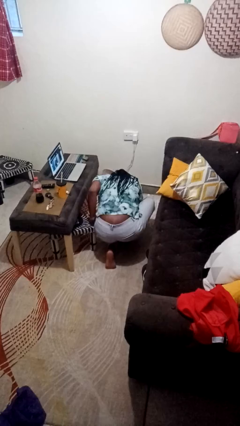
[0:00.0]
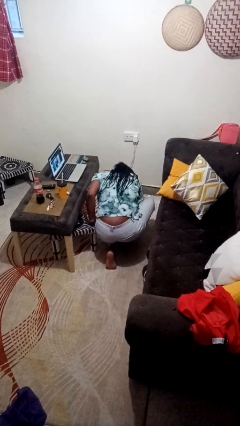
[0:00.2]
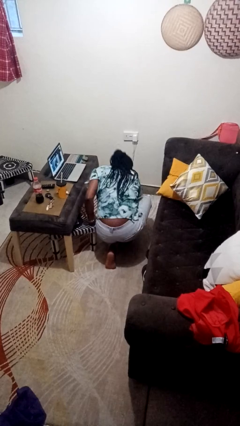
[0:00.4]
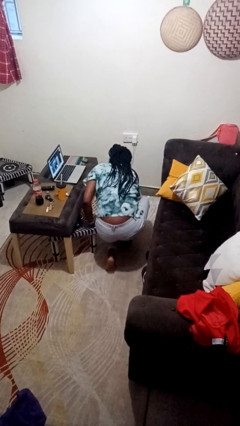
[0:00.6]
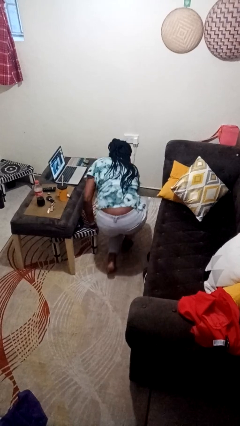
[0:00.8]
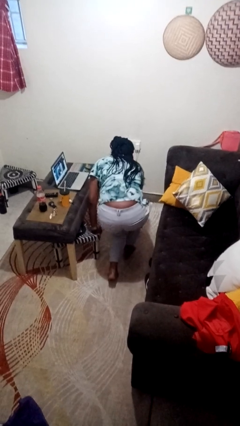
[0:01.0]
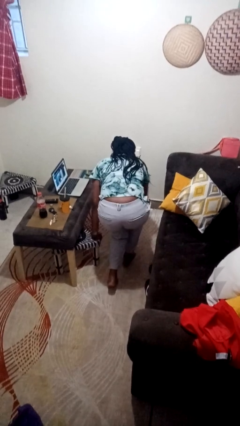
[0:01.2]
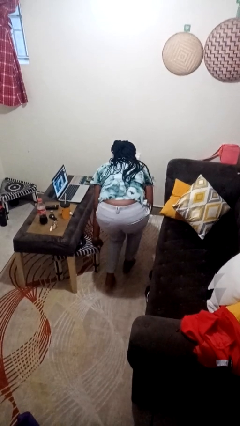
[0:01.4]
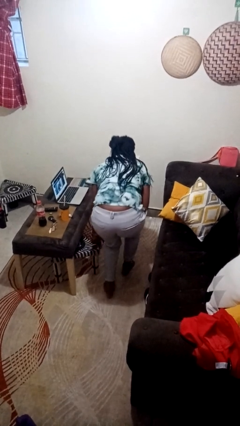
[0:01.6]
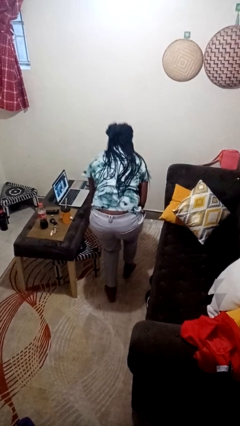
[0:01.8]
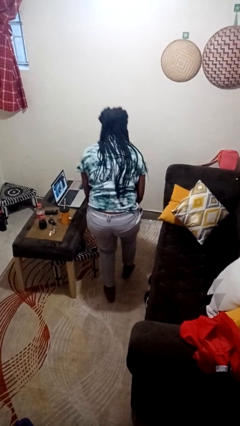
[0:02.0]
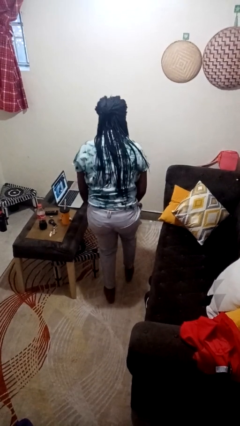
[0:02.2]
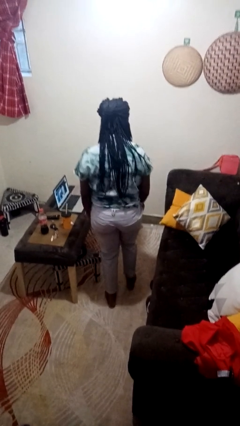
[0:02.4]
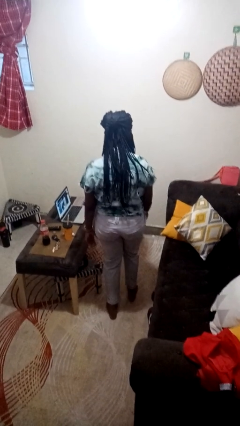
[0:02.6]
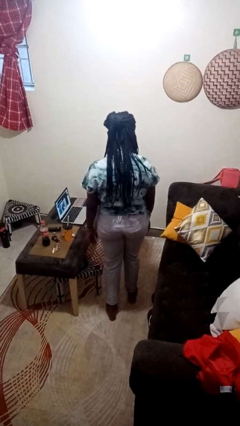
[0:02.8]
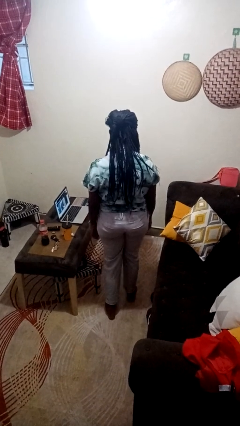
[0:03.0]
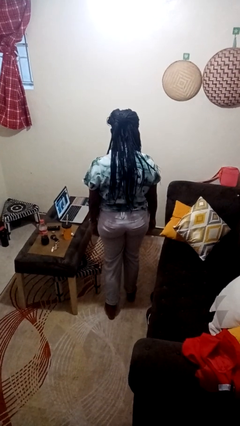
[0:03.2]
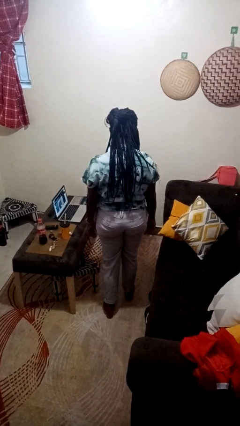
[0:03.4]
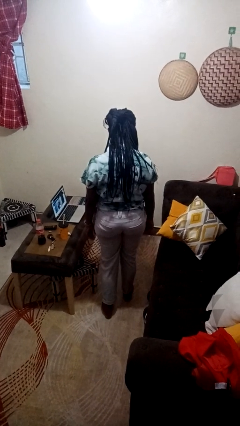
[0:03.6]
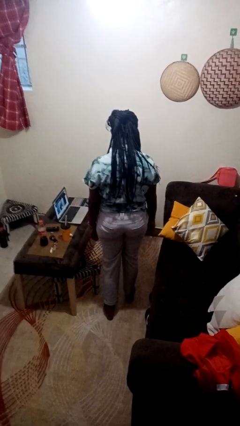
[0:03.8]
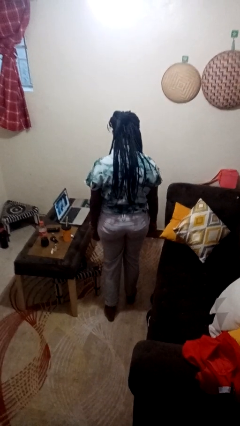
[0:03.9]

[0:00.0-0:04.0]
person stands up from floor

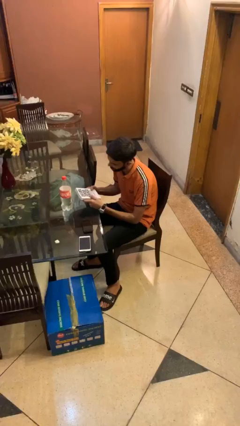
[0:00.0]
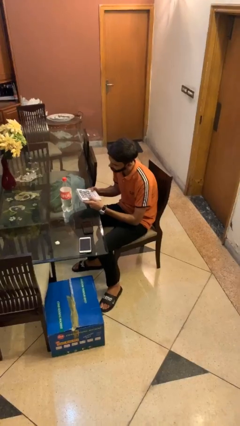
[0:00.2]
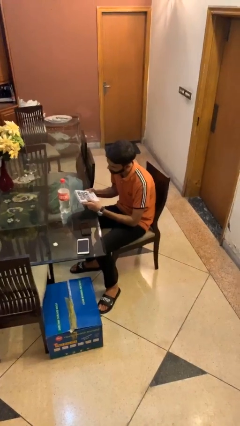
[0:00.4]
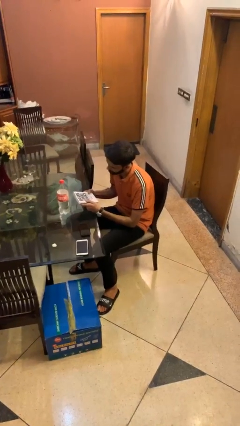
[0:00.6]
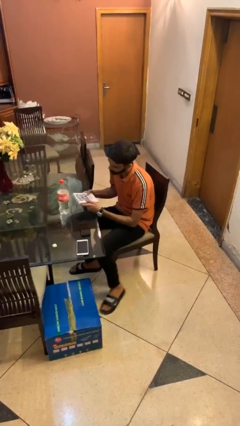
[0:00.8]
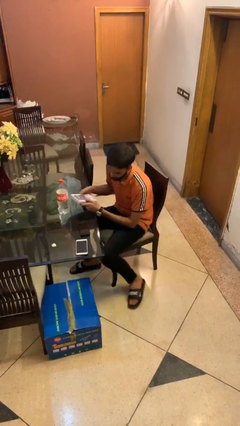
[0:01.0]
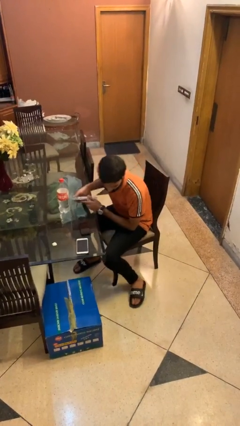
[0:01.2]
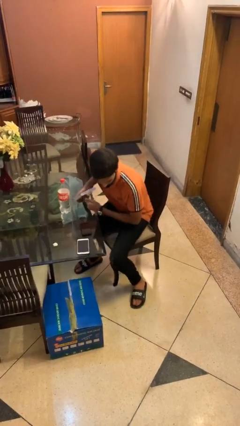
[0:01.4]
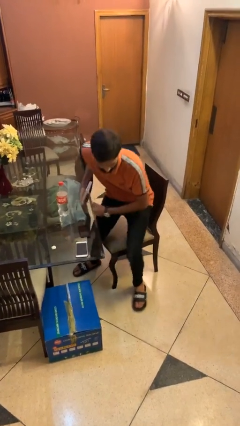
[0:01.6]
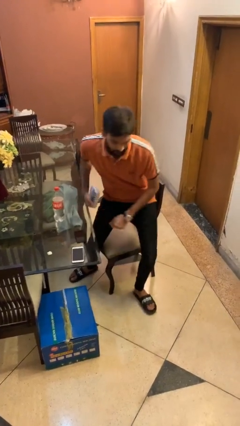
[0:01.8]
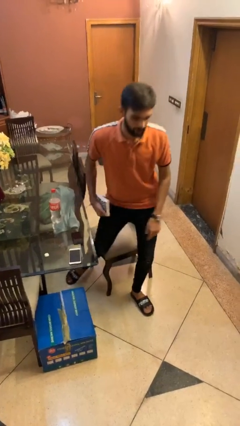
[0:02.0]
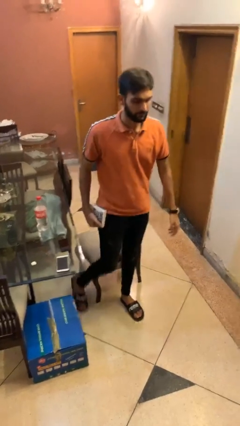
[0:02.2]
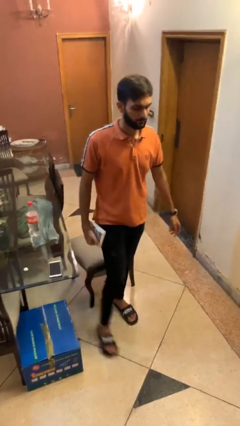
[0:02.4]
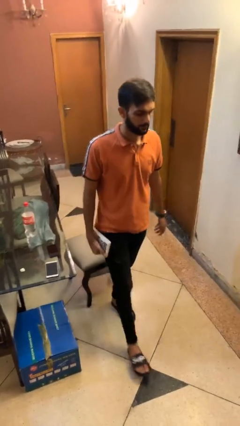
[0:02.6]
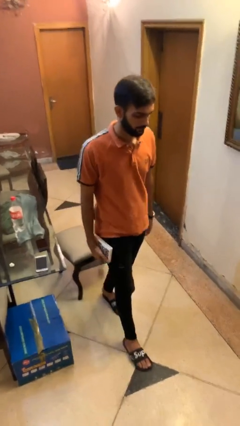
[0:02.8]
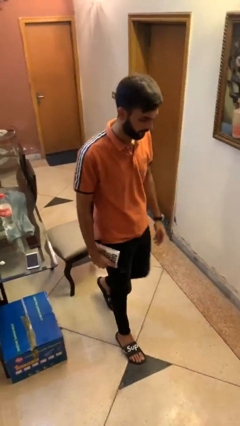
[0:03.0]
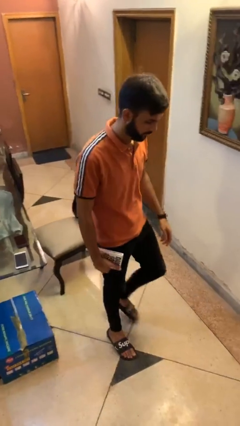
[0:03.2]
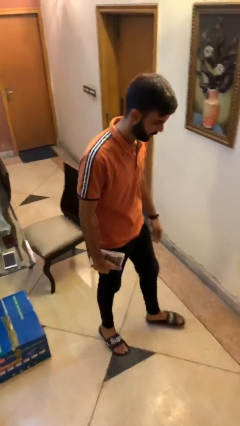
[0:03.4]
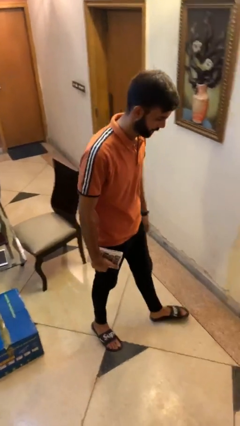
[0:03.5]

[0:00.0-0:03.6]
person stands up

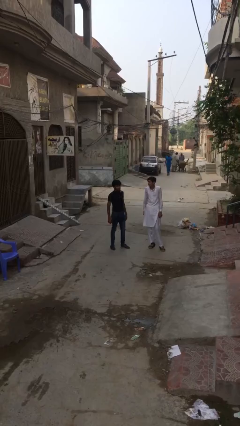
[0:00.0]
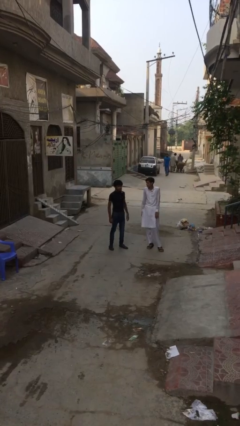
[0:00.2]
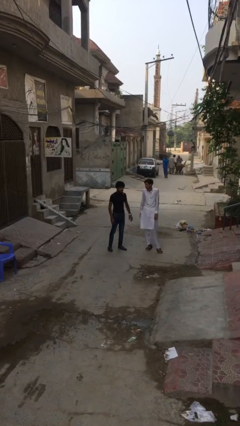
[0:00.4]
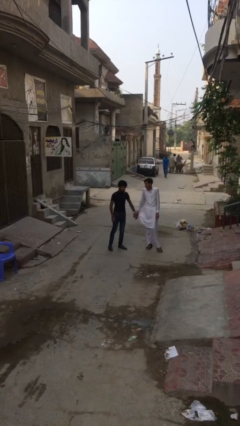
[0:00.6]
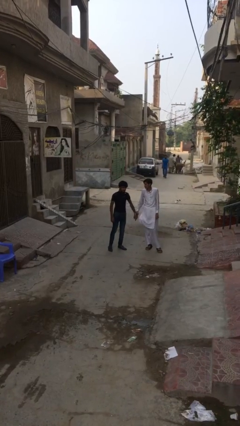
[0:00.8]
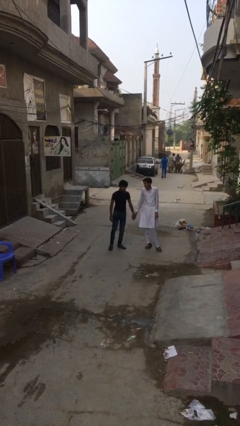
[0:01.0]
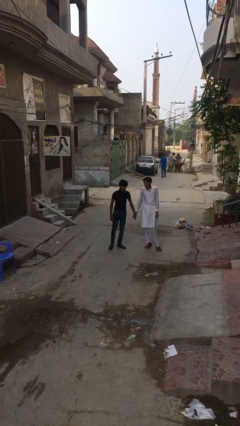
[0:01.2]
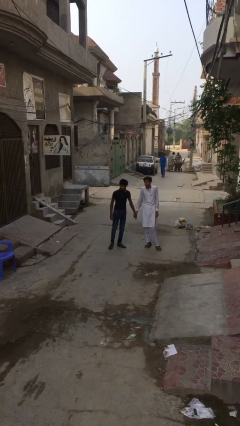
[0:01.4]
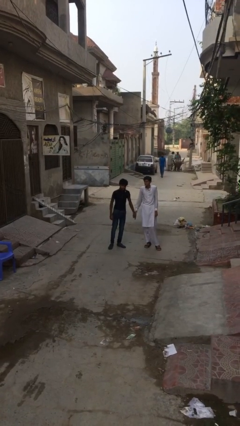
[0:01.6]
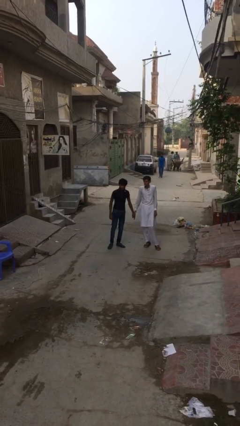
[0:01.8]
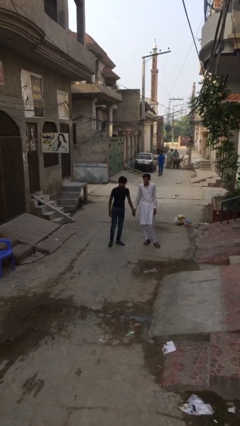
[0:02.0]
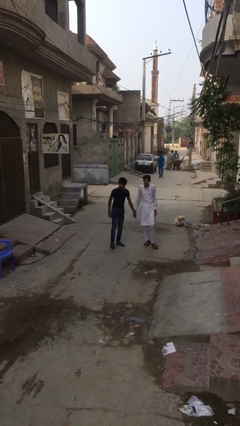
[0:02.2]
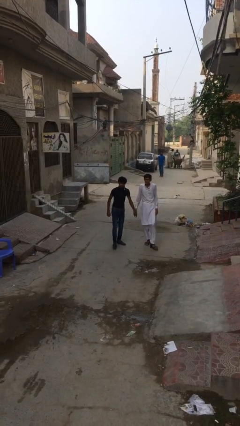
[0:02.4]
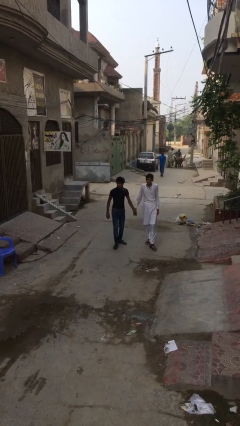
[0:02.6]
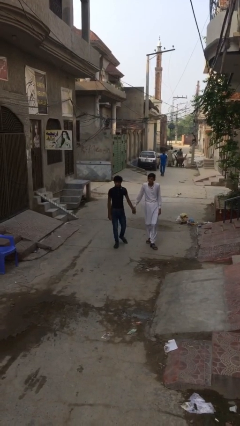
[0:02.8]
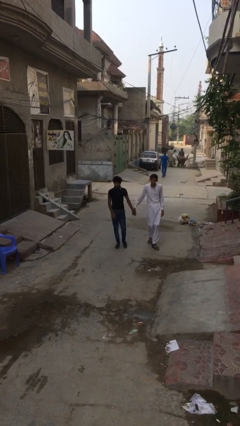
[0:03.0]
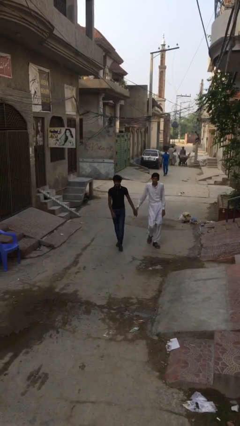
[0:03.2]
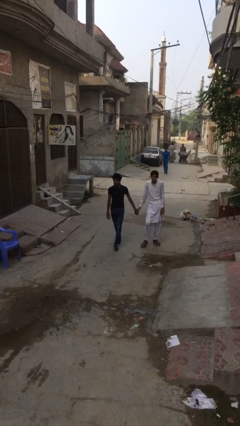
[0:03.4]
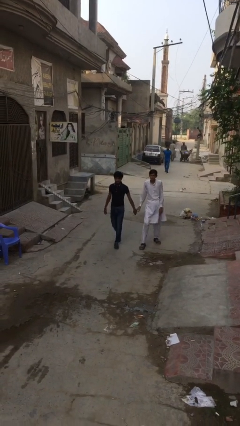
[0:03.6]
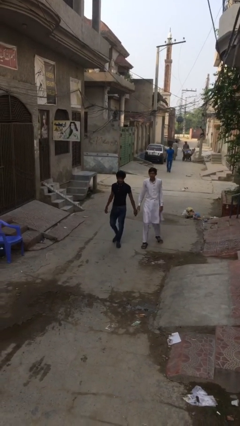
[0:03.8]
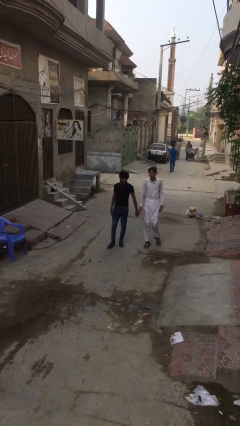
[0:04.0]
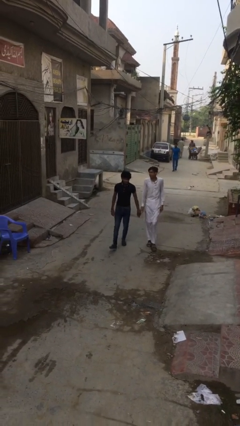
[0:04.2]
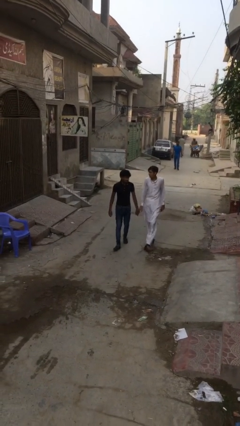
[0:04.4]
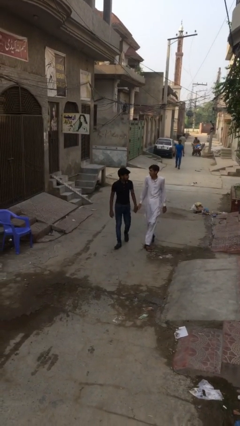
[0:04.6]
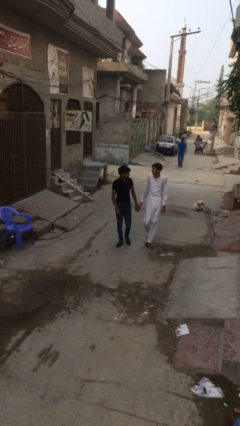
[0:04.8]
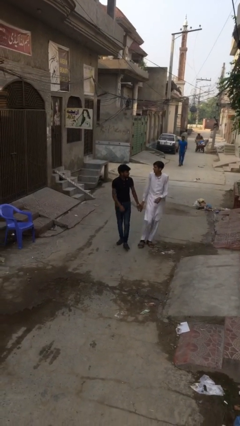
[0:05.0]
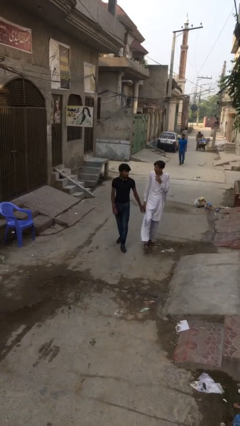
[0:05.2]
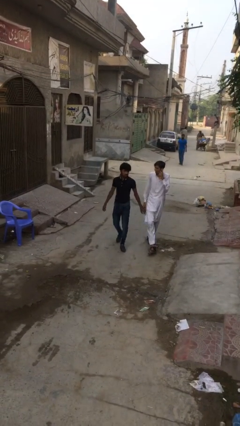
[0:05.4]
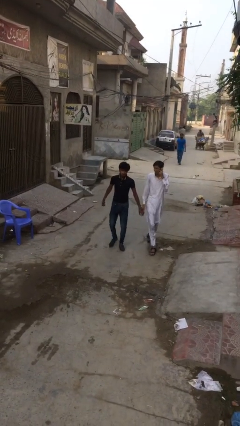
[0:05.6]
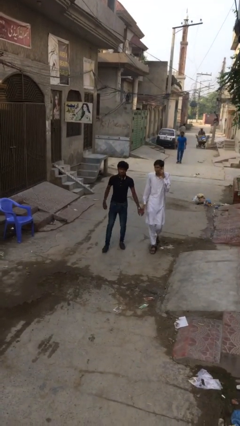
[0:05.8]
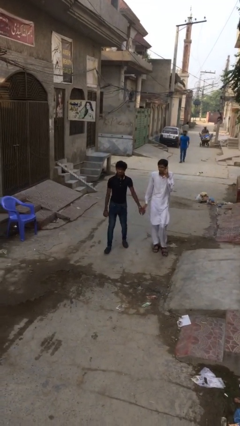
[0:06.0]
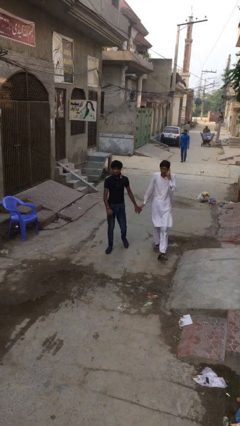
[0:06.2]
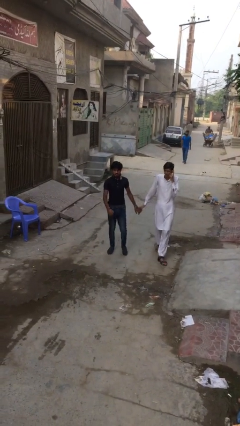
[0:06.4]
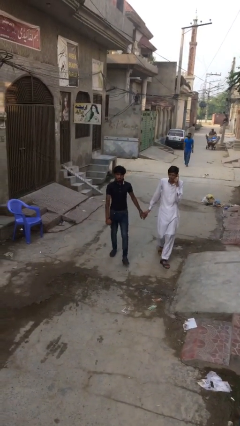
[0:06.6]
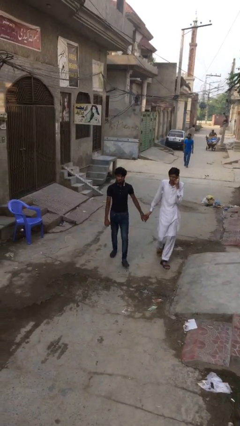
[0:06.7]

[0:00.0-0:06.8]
person holds hand

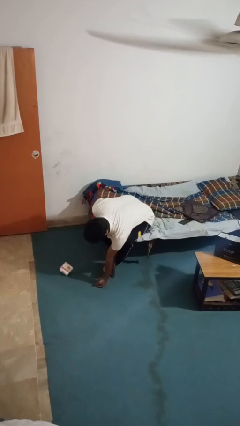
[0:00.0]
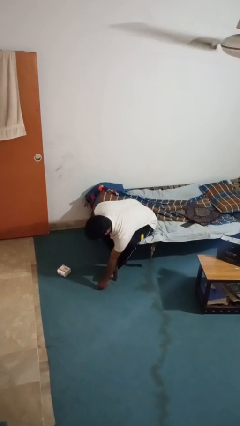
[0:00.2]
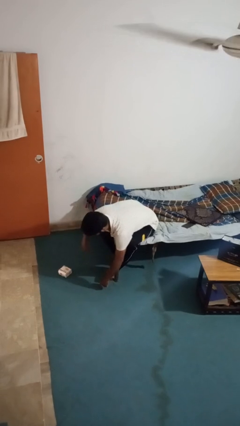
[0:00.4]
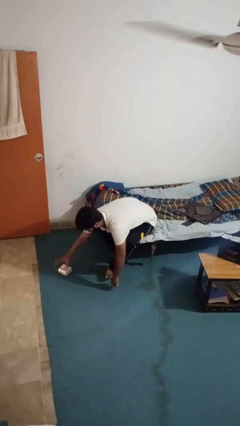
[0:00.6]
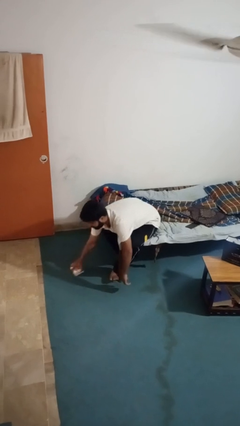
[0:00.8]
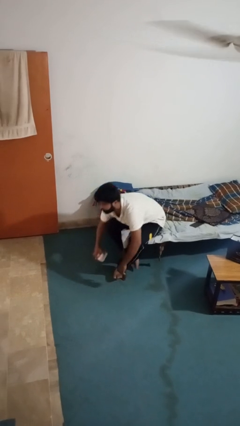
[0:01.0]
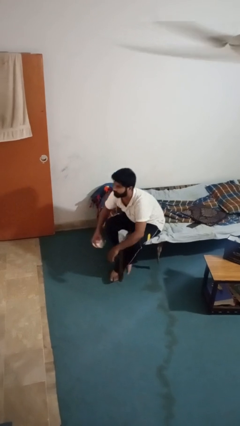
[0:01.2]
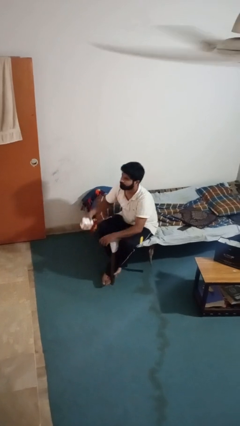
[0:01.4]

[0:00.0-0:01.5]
person picks up object from floor

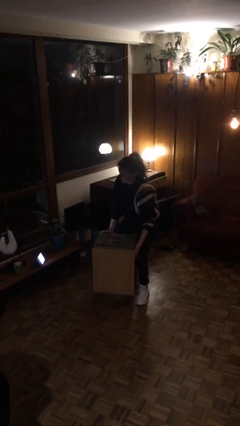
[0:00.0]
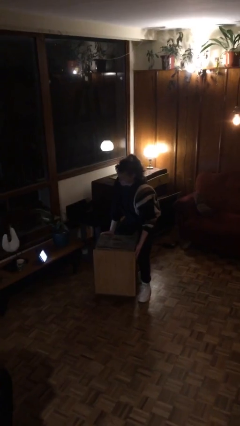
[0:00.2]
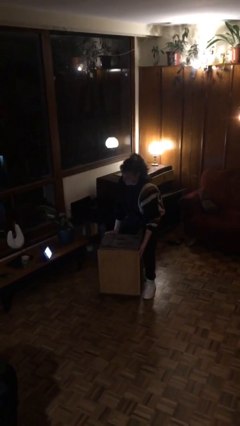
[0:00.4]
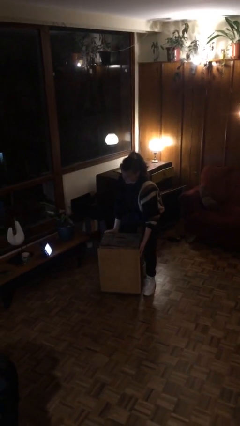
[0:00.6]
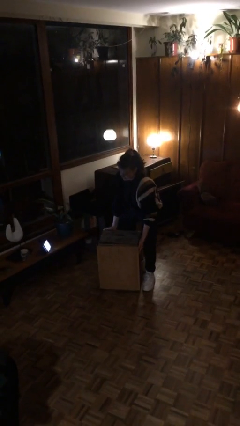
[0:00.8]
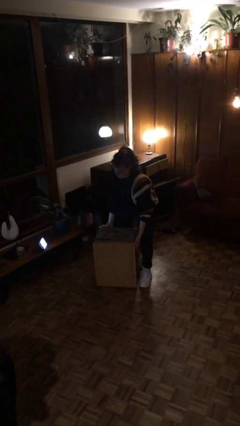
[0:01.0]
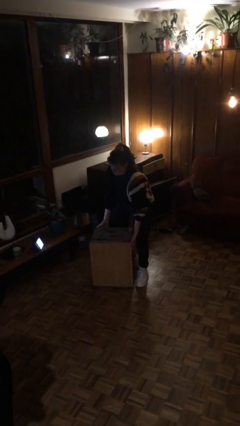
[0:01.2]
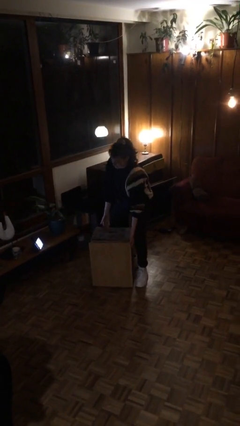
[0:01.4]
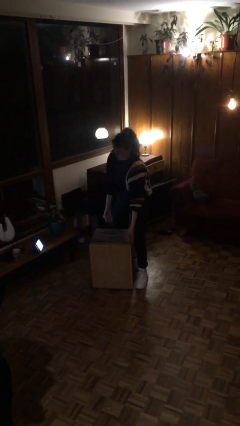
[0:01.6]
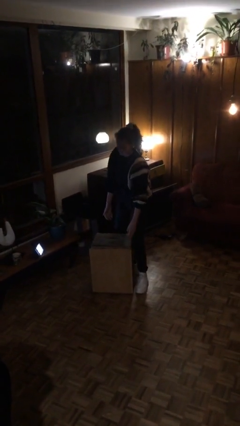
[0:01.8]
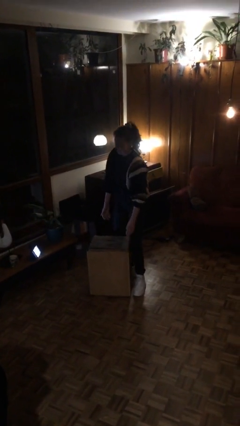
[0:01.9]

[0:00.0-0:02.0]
person puts down object on floor
